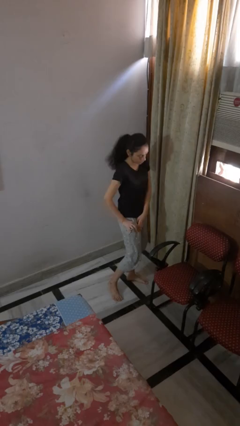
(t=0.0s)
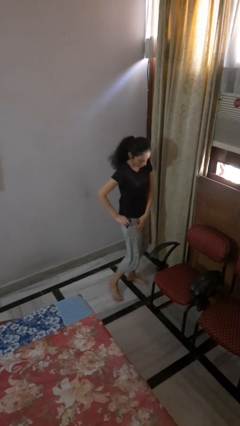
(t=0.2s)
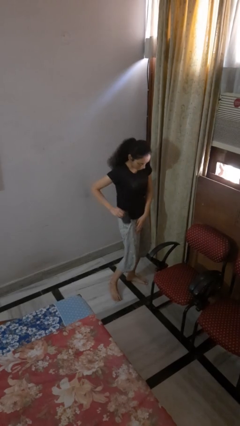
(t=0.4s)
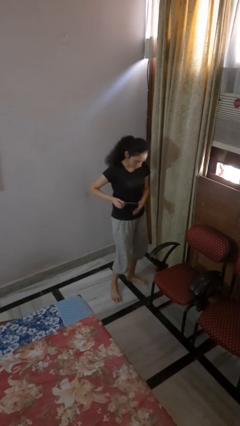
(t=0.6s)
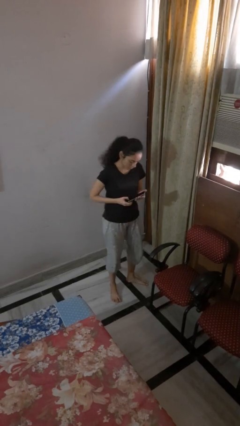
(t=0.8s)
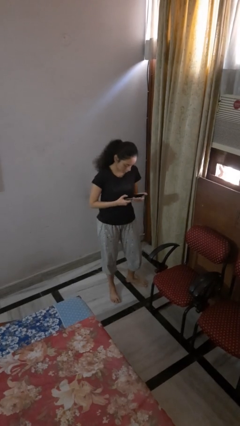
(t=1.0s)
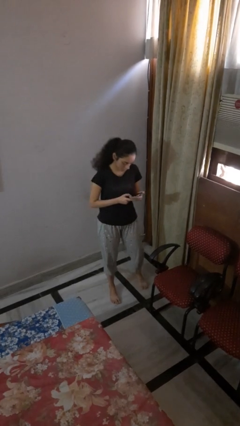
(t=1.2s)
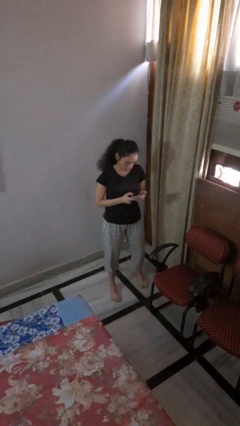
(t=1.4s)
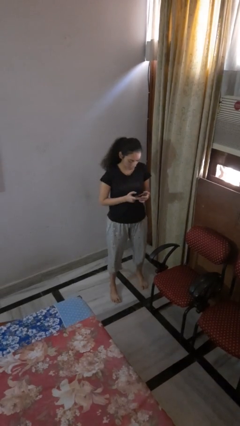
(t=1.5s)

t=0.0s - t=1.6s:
person takes phone from pocket

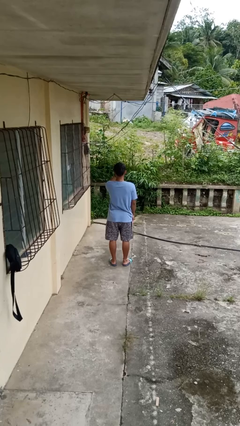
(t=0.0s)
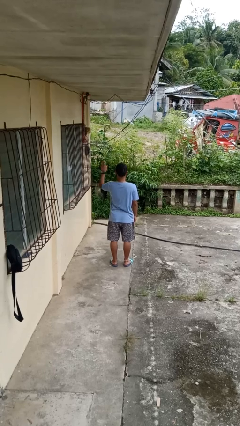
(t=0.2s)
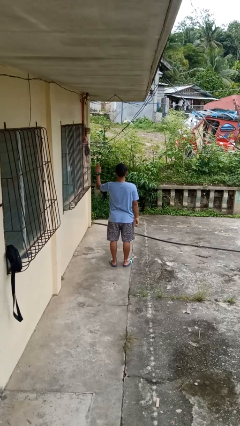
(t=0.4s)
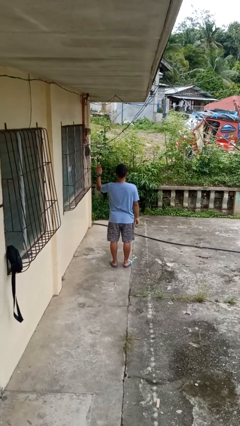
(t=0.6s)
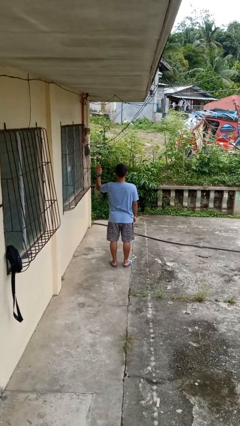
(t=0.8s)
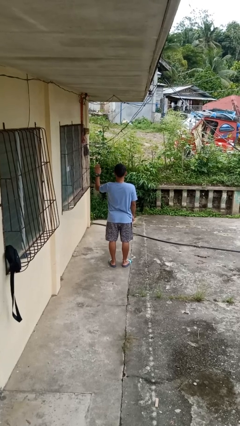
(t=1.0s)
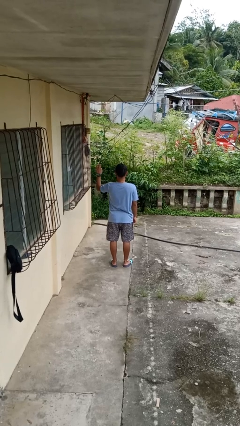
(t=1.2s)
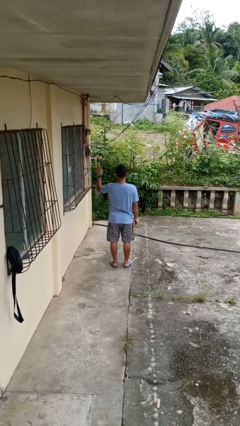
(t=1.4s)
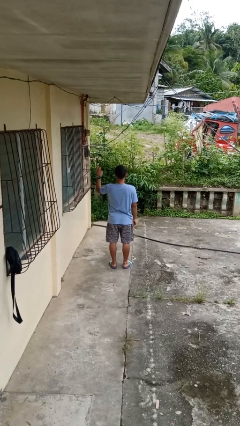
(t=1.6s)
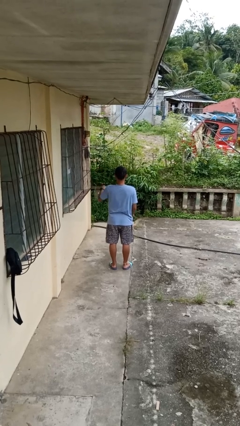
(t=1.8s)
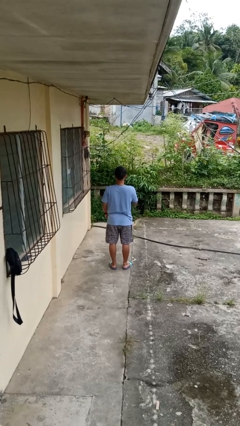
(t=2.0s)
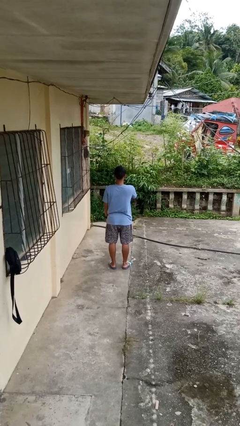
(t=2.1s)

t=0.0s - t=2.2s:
person gestures swipe left

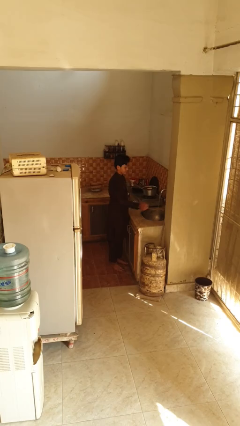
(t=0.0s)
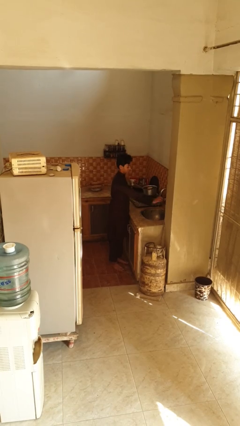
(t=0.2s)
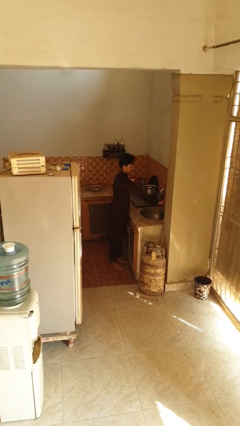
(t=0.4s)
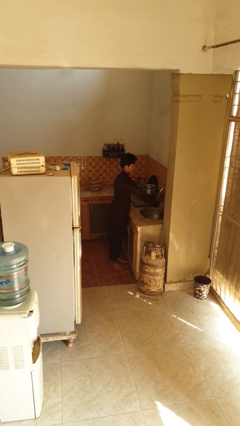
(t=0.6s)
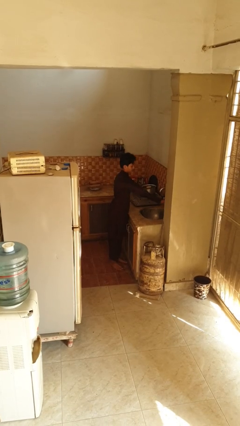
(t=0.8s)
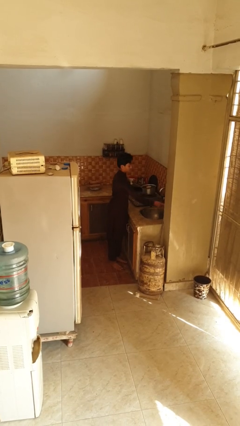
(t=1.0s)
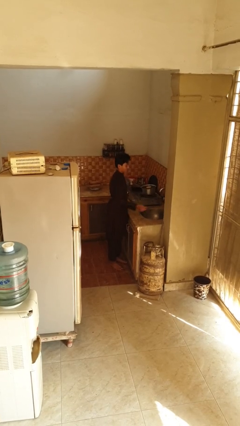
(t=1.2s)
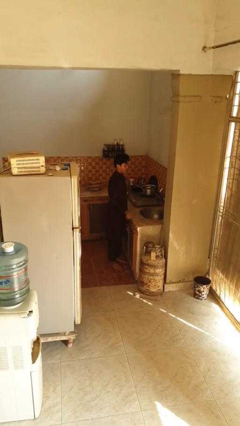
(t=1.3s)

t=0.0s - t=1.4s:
person turns off faucet

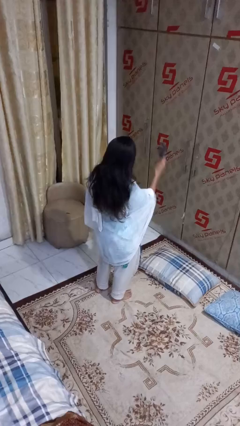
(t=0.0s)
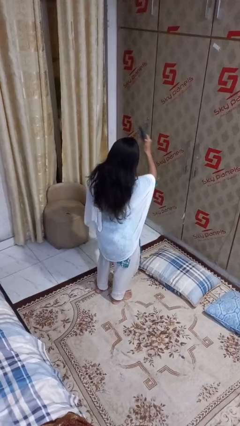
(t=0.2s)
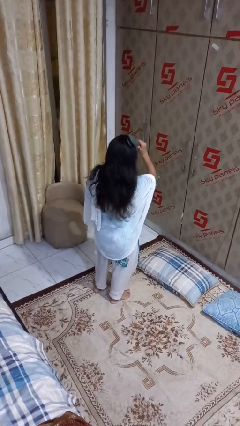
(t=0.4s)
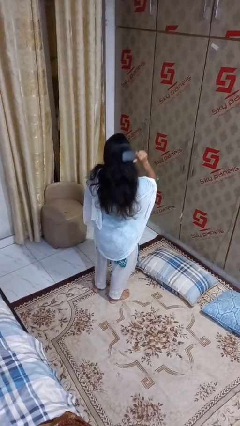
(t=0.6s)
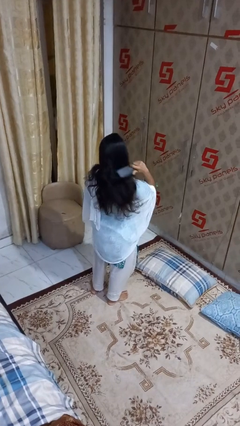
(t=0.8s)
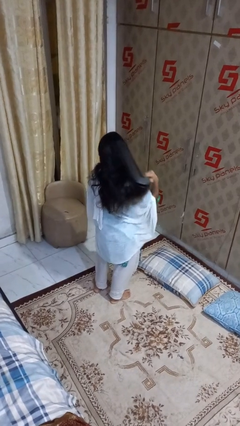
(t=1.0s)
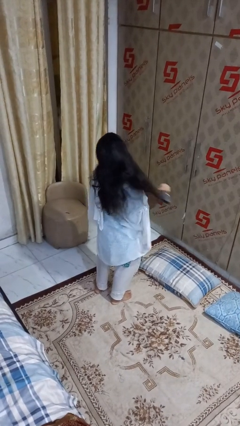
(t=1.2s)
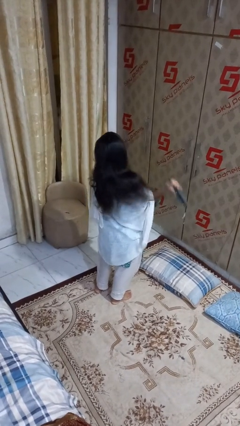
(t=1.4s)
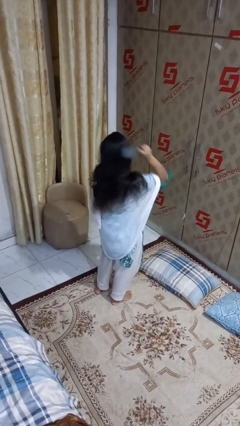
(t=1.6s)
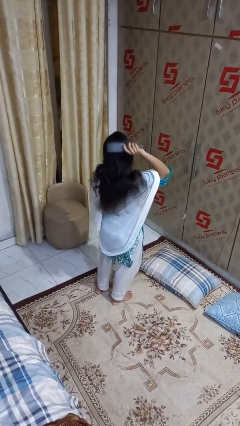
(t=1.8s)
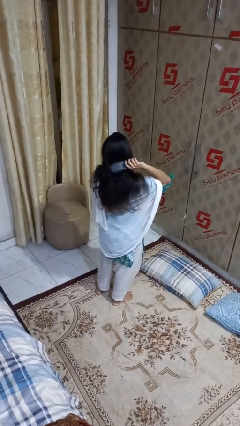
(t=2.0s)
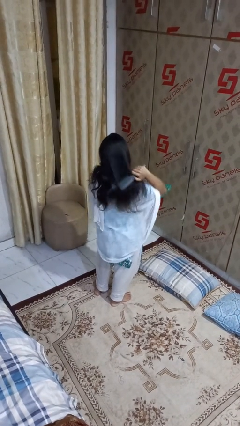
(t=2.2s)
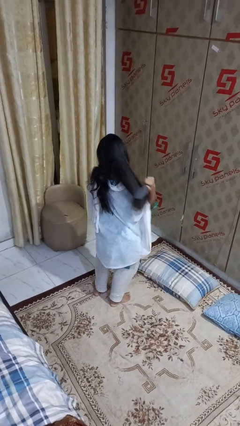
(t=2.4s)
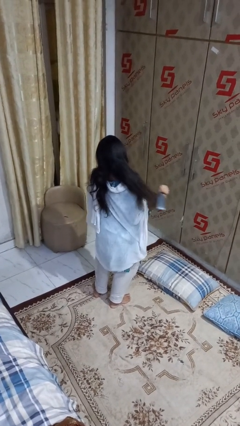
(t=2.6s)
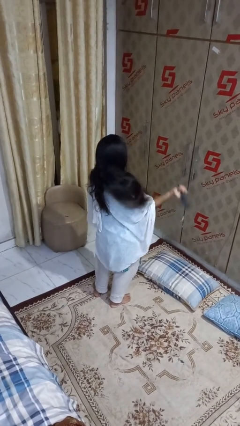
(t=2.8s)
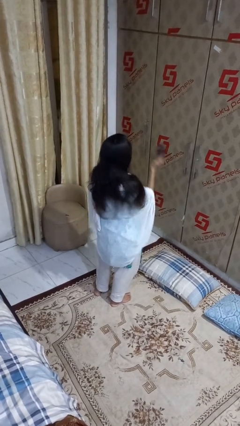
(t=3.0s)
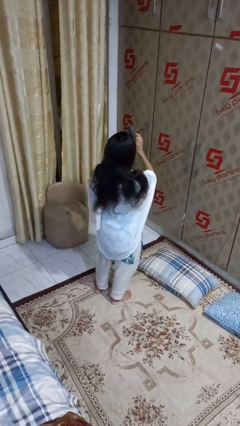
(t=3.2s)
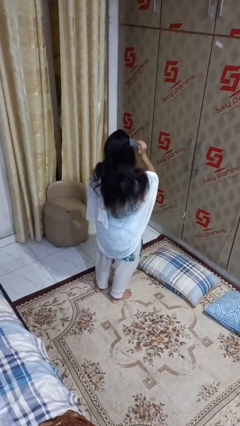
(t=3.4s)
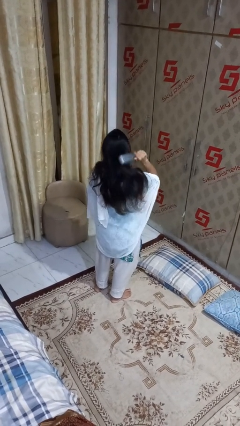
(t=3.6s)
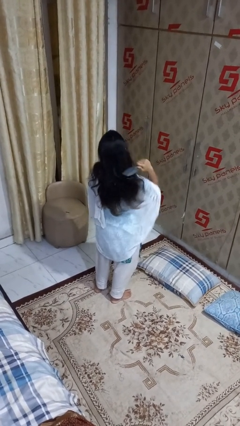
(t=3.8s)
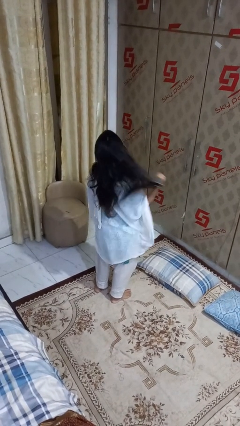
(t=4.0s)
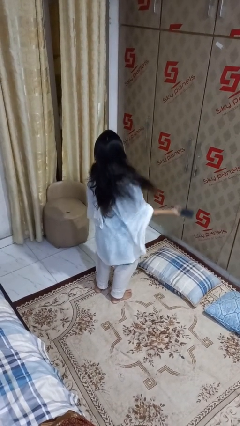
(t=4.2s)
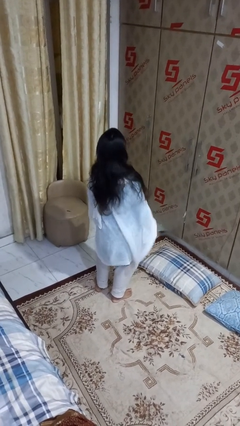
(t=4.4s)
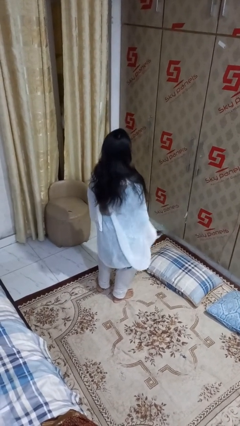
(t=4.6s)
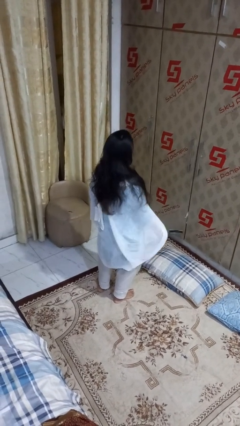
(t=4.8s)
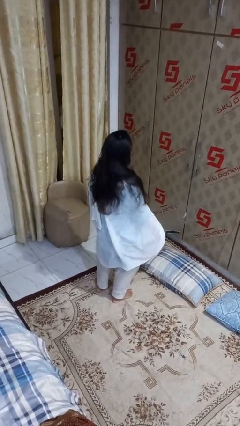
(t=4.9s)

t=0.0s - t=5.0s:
person brushes hair

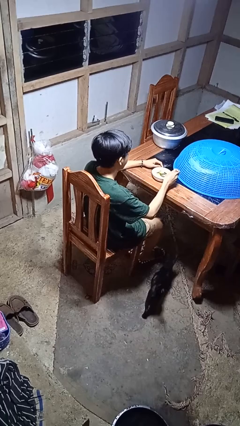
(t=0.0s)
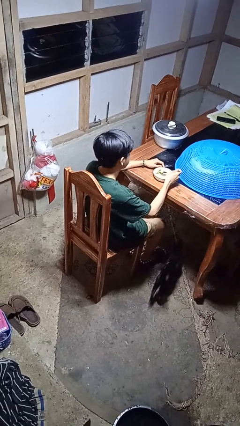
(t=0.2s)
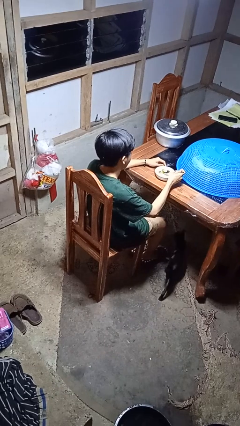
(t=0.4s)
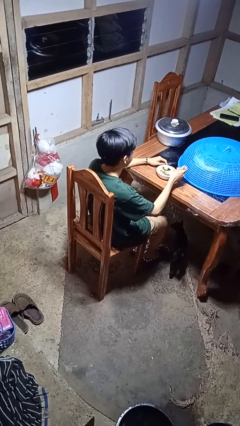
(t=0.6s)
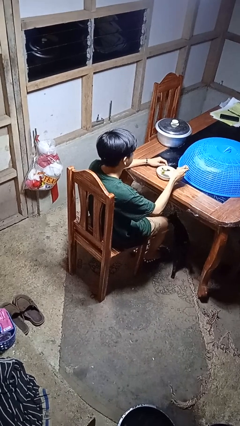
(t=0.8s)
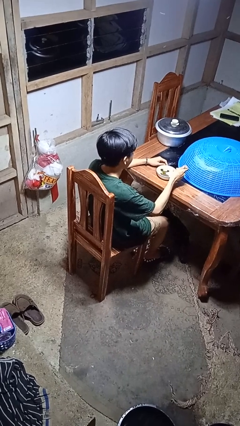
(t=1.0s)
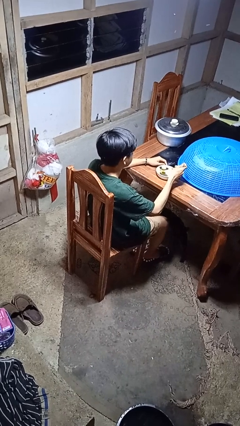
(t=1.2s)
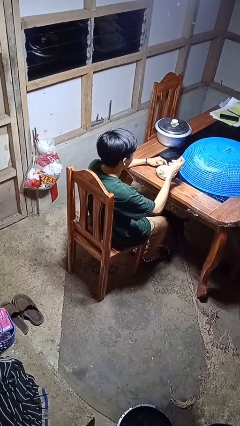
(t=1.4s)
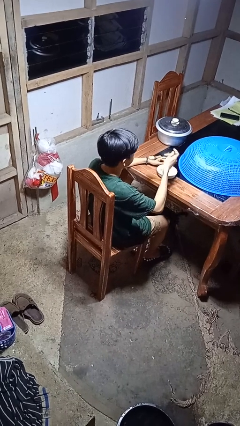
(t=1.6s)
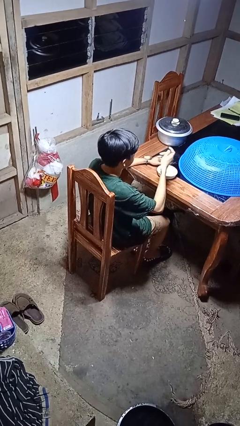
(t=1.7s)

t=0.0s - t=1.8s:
person eats with utensil

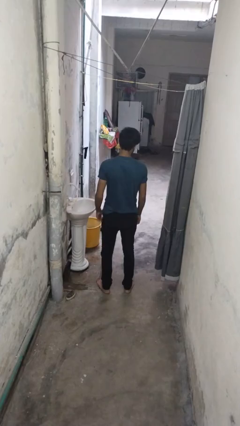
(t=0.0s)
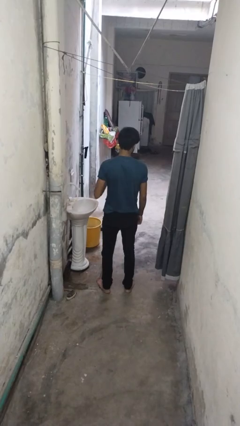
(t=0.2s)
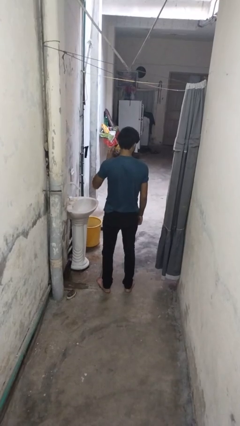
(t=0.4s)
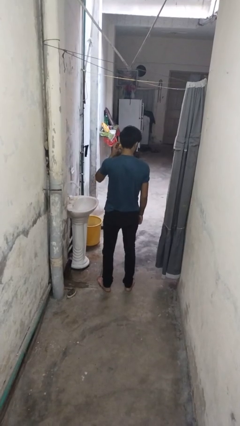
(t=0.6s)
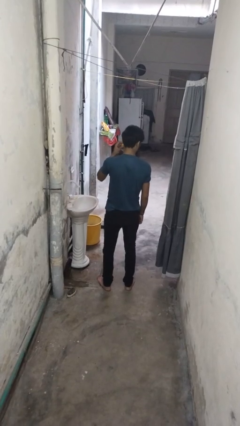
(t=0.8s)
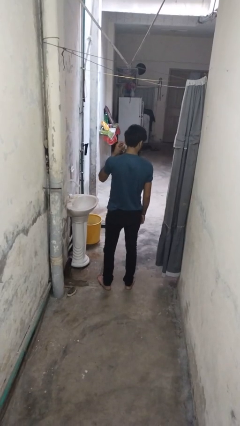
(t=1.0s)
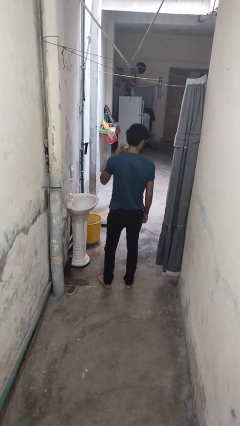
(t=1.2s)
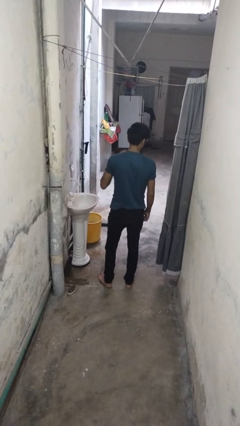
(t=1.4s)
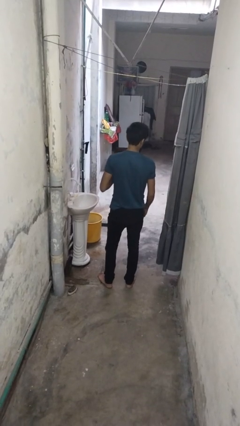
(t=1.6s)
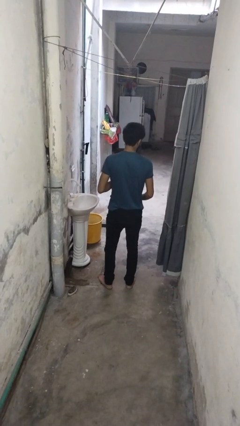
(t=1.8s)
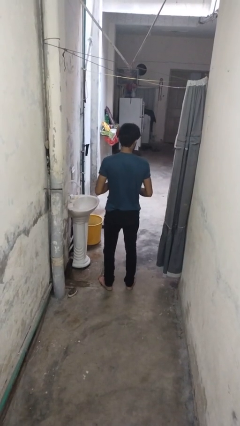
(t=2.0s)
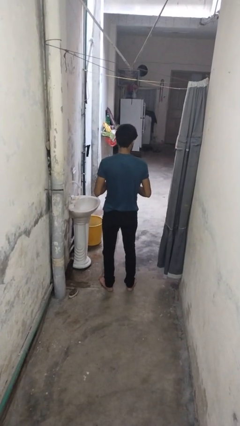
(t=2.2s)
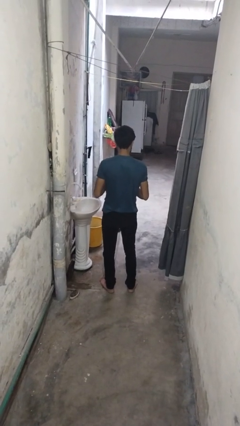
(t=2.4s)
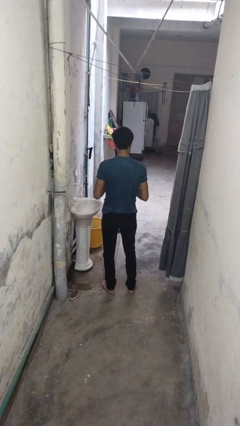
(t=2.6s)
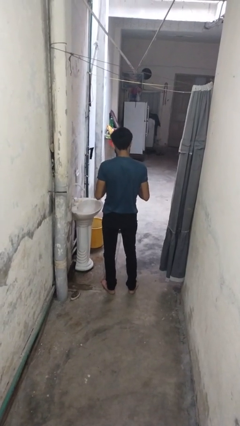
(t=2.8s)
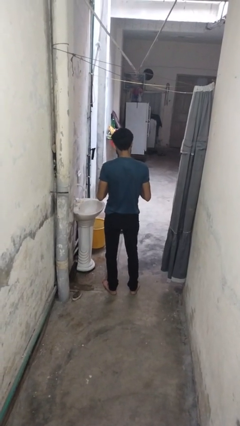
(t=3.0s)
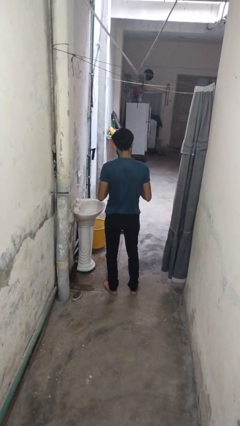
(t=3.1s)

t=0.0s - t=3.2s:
person takes off earrings

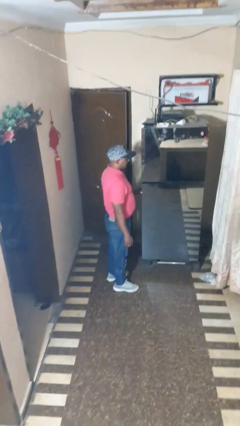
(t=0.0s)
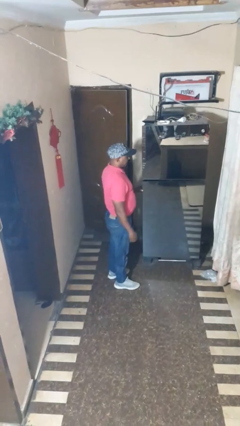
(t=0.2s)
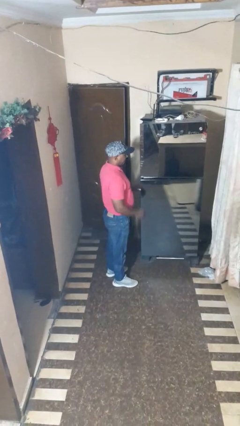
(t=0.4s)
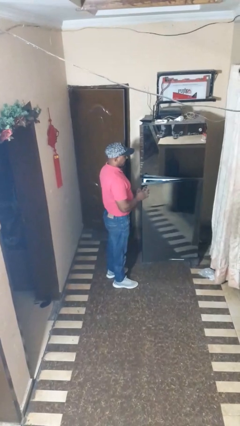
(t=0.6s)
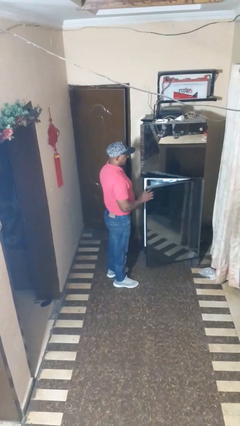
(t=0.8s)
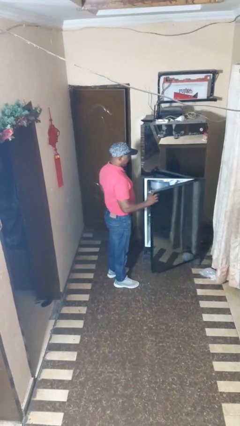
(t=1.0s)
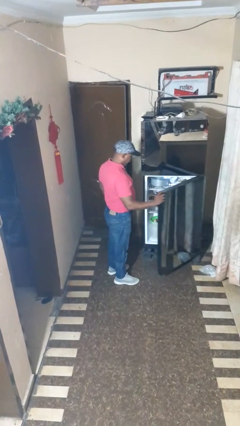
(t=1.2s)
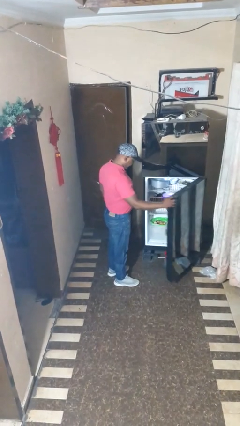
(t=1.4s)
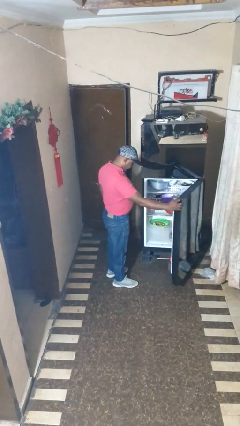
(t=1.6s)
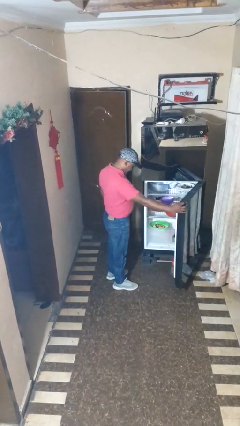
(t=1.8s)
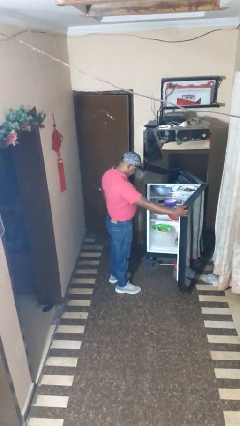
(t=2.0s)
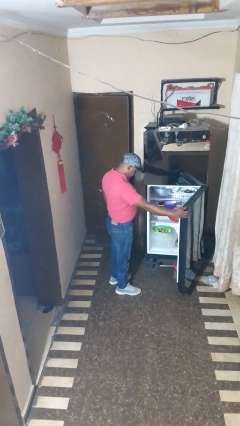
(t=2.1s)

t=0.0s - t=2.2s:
person opens refrigerator
